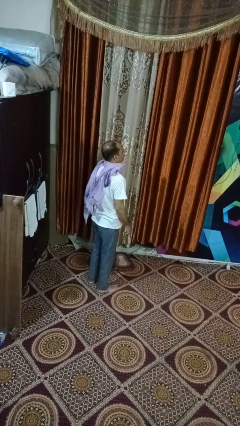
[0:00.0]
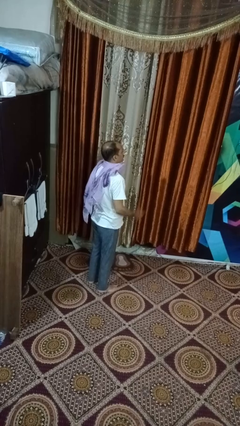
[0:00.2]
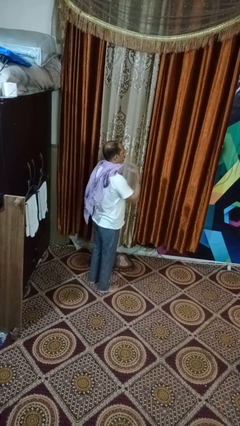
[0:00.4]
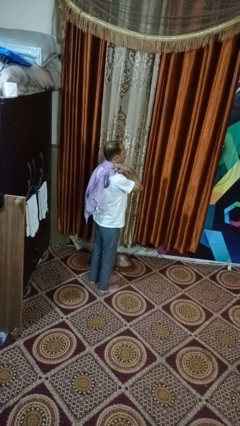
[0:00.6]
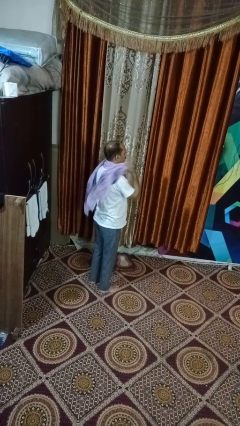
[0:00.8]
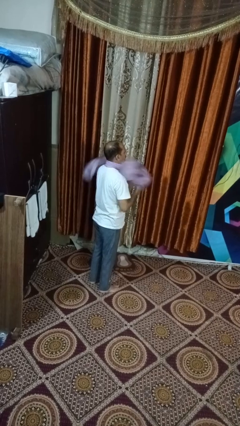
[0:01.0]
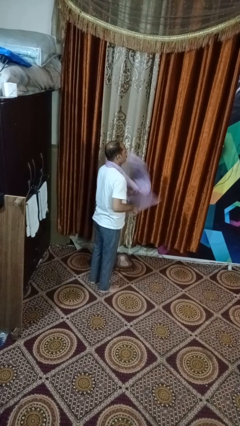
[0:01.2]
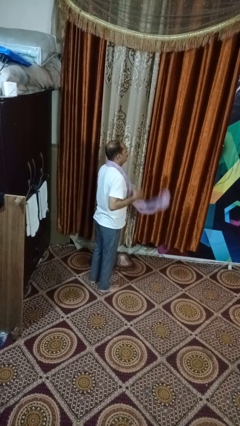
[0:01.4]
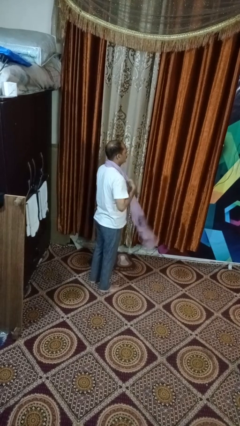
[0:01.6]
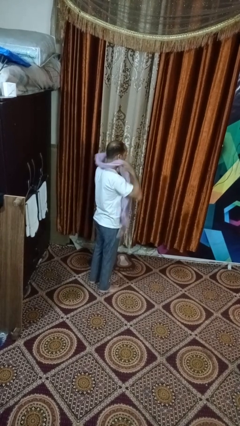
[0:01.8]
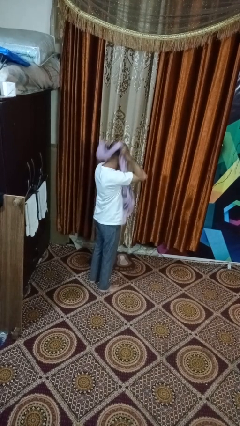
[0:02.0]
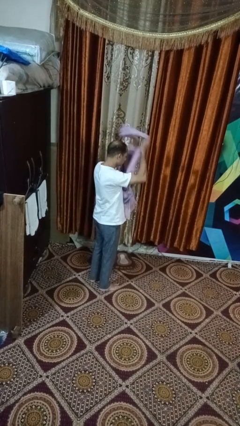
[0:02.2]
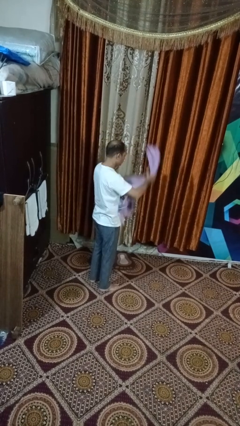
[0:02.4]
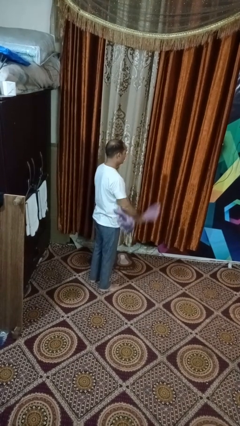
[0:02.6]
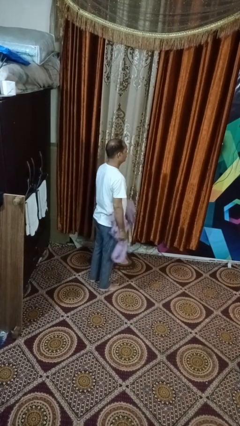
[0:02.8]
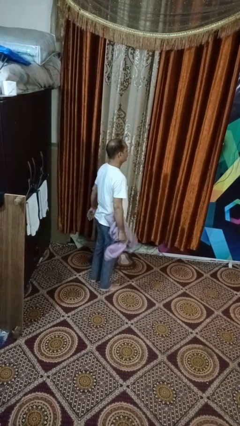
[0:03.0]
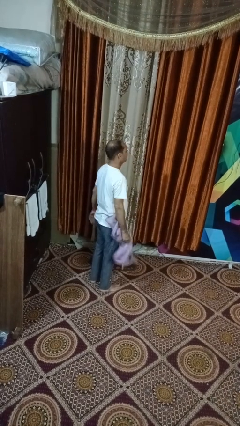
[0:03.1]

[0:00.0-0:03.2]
person takes off scarf

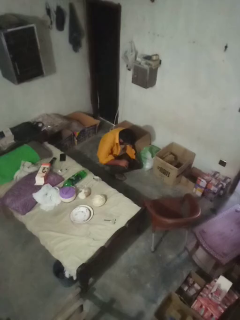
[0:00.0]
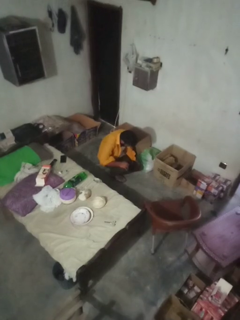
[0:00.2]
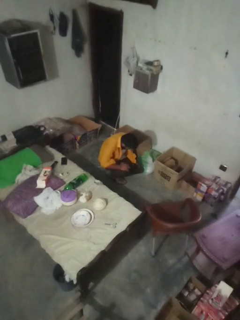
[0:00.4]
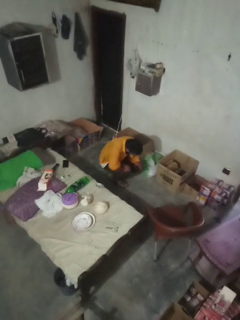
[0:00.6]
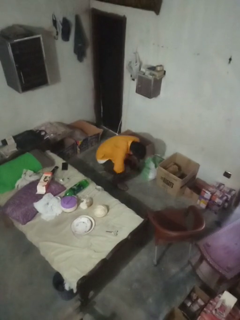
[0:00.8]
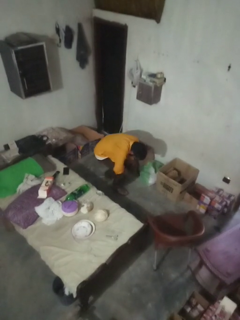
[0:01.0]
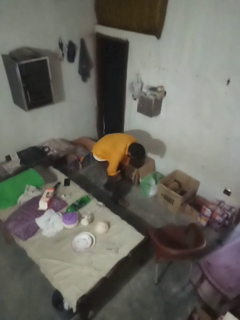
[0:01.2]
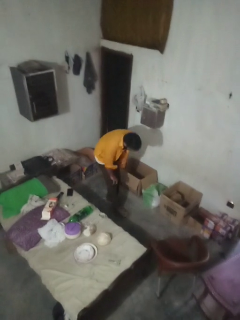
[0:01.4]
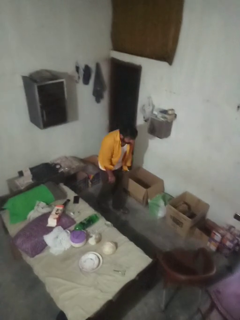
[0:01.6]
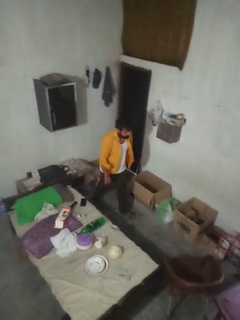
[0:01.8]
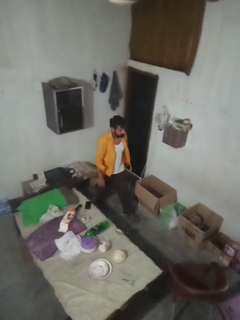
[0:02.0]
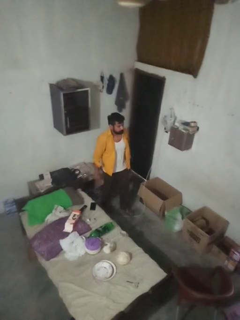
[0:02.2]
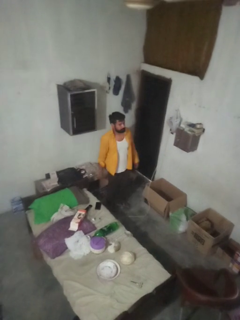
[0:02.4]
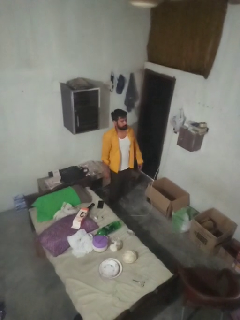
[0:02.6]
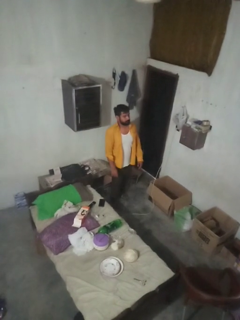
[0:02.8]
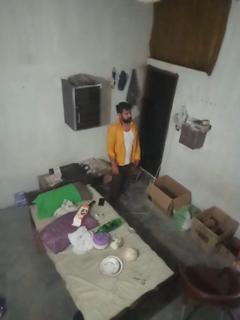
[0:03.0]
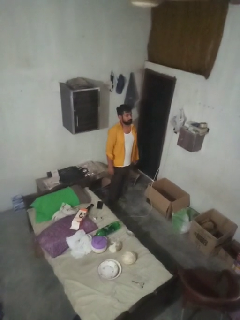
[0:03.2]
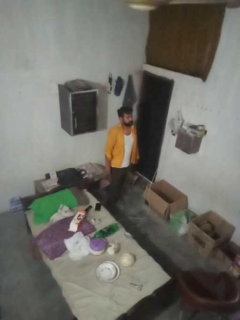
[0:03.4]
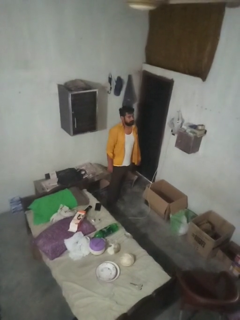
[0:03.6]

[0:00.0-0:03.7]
person stands up from floor

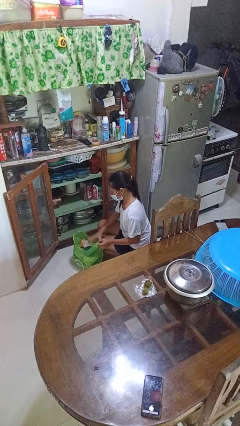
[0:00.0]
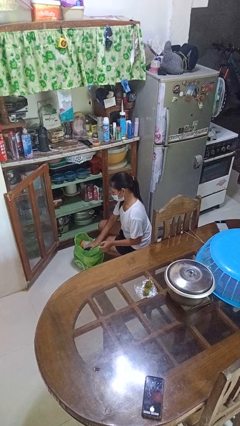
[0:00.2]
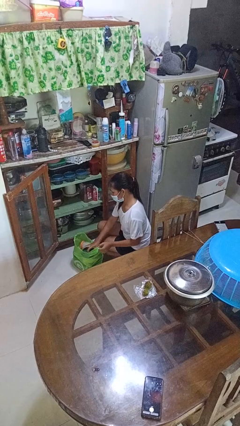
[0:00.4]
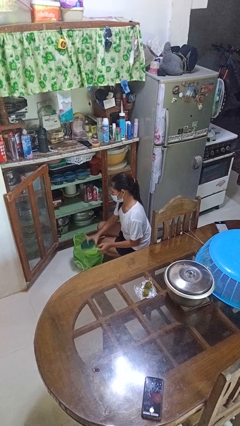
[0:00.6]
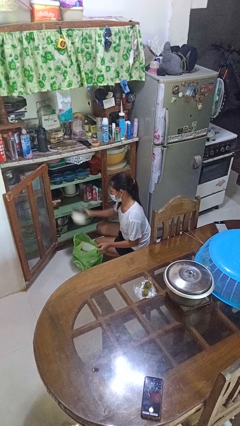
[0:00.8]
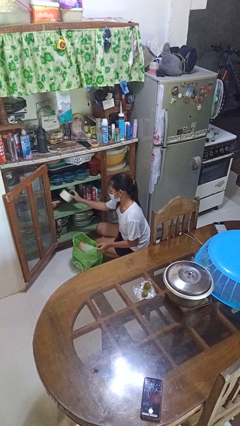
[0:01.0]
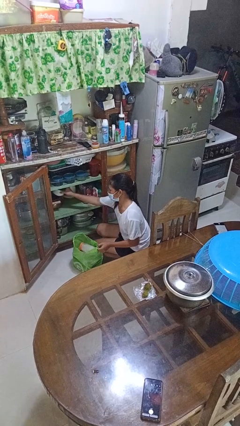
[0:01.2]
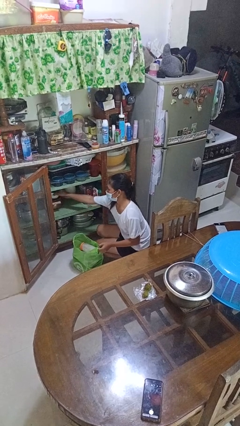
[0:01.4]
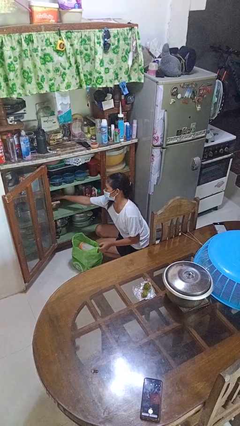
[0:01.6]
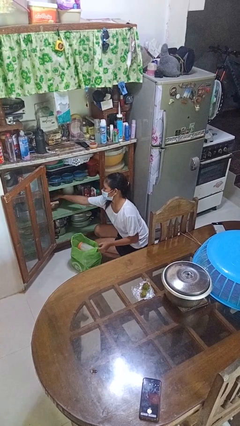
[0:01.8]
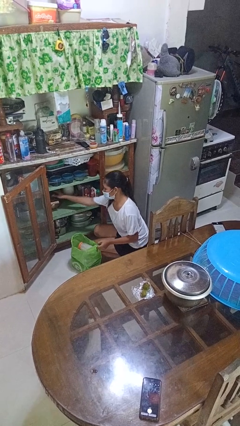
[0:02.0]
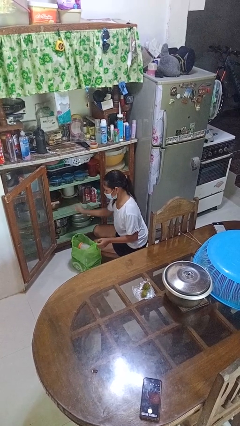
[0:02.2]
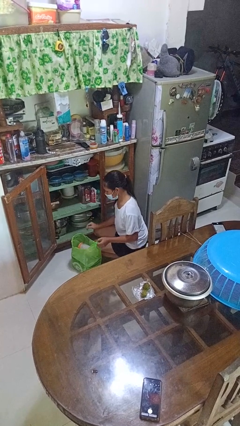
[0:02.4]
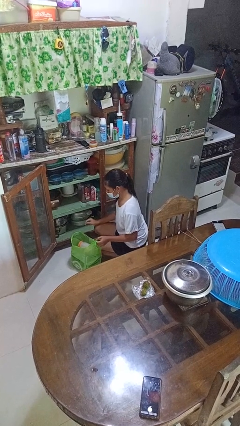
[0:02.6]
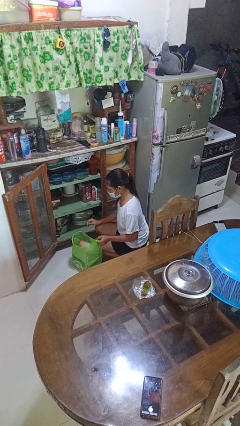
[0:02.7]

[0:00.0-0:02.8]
person loads groceries into cabinet

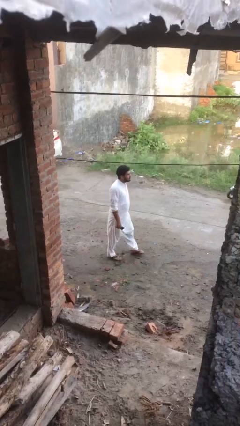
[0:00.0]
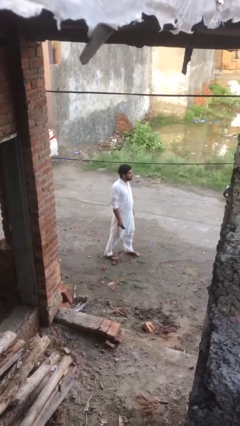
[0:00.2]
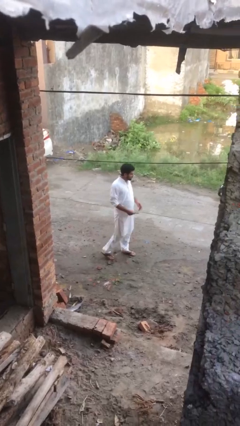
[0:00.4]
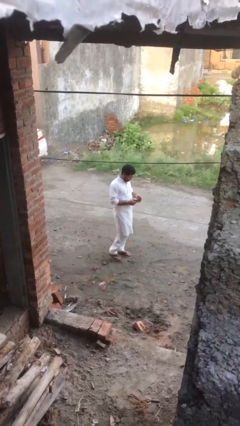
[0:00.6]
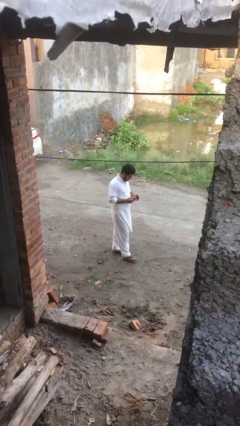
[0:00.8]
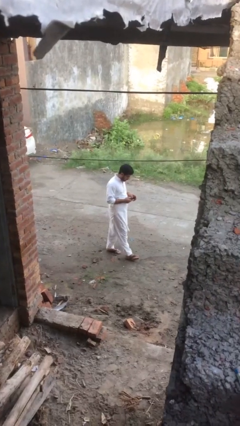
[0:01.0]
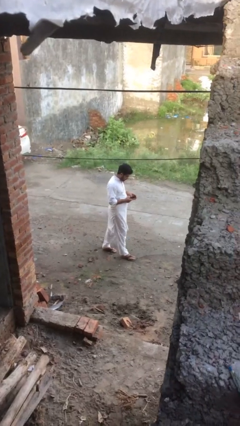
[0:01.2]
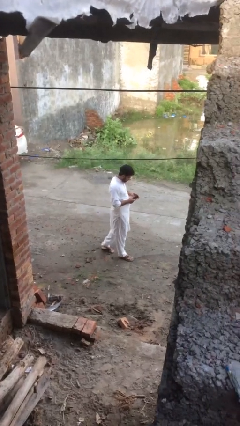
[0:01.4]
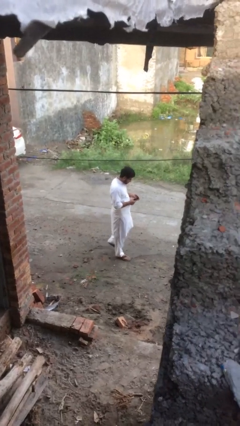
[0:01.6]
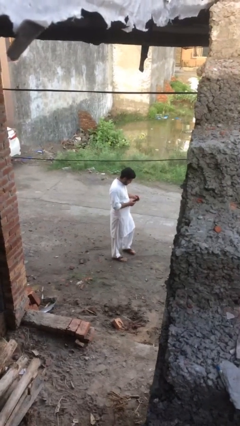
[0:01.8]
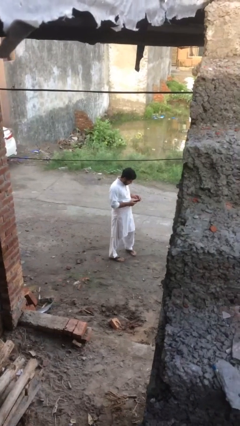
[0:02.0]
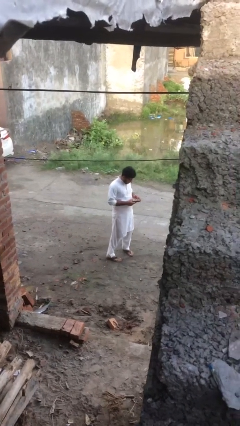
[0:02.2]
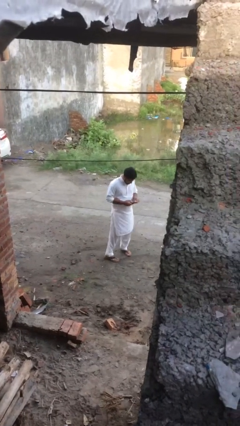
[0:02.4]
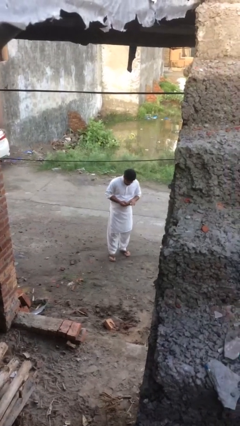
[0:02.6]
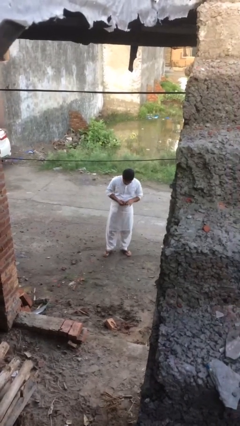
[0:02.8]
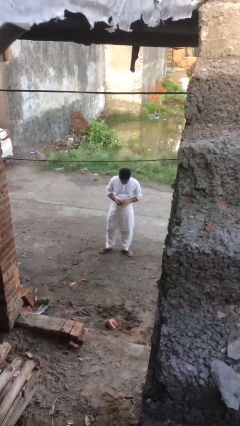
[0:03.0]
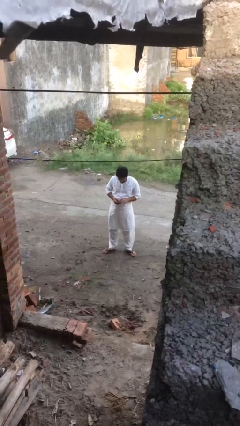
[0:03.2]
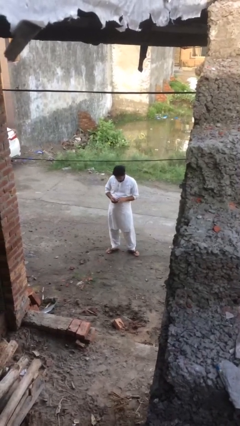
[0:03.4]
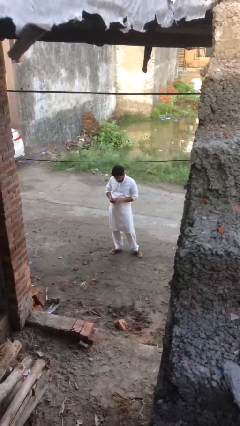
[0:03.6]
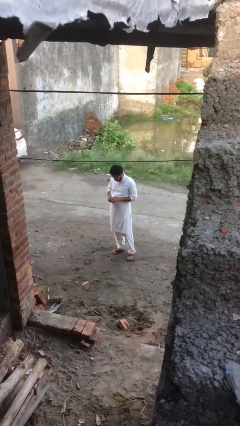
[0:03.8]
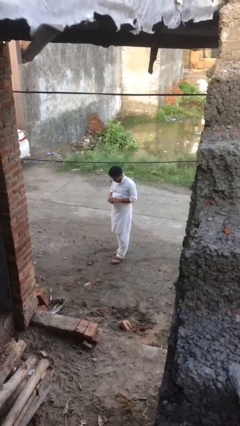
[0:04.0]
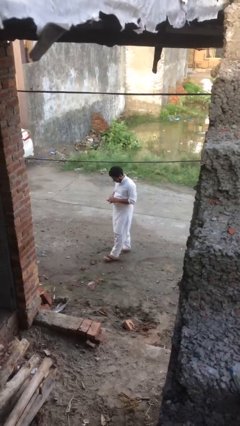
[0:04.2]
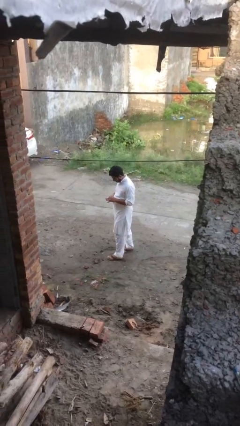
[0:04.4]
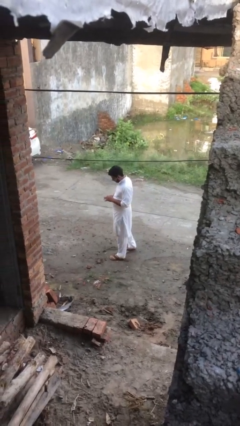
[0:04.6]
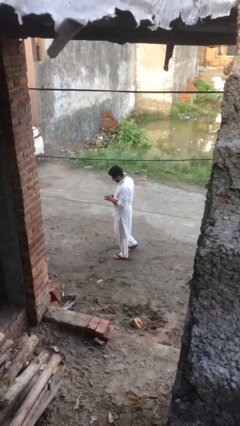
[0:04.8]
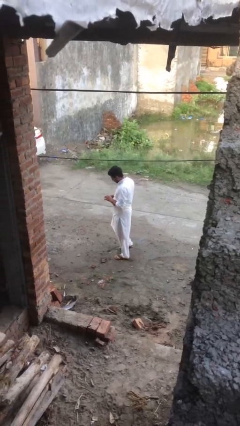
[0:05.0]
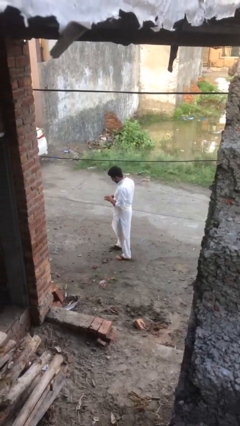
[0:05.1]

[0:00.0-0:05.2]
person texts on phone

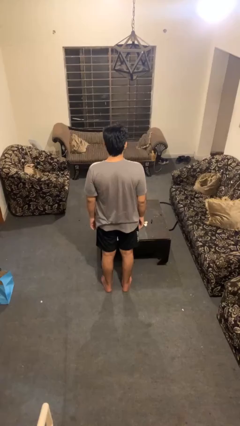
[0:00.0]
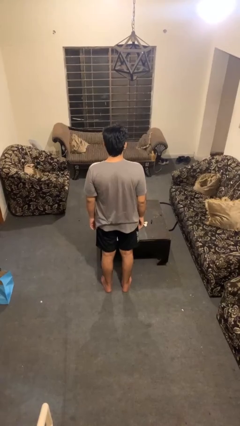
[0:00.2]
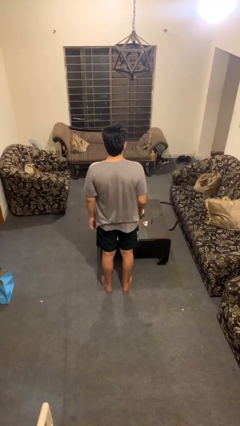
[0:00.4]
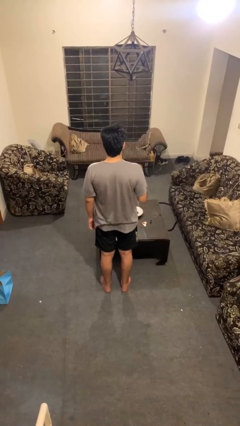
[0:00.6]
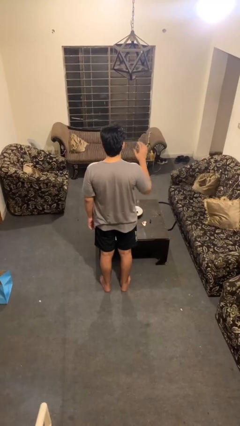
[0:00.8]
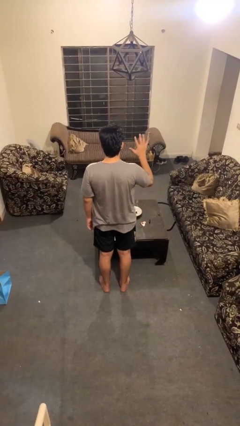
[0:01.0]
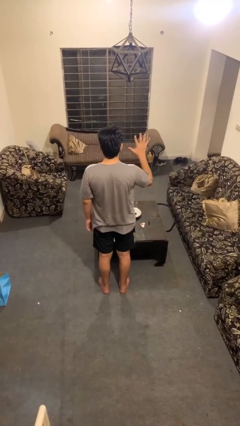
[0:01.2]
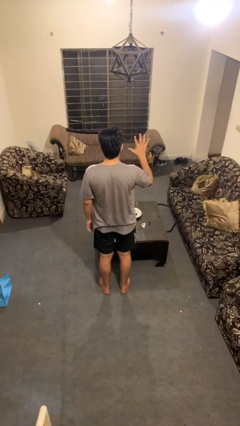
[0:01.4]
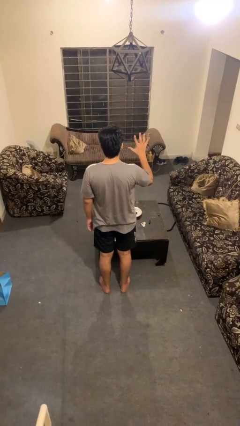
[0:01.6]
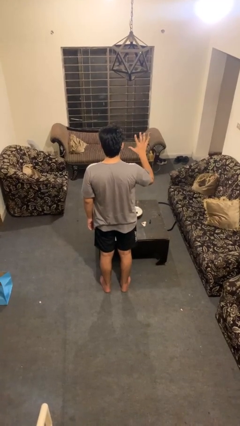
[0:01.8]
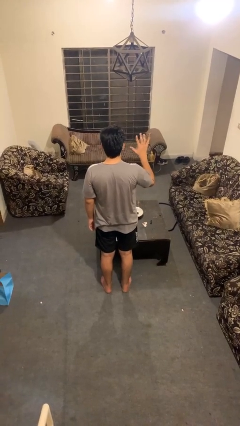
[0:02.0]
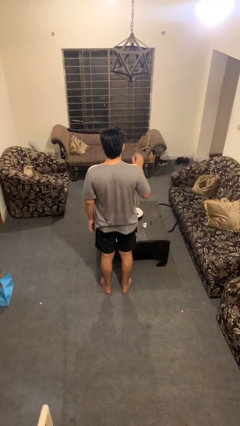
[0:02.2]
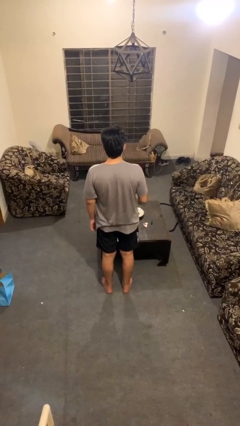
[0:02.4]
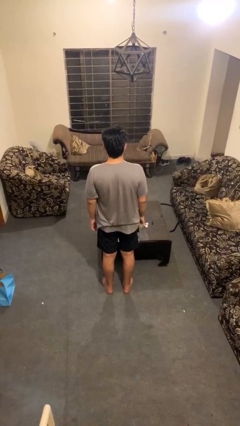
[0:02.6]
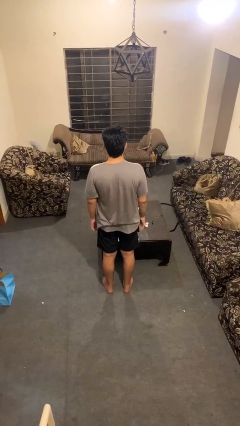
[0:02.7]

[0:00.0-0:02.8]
person gestures number five

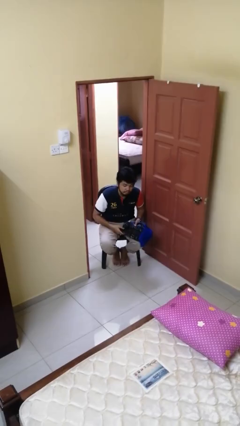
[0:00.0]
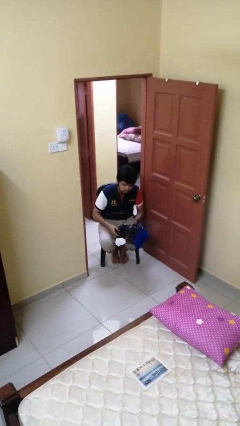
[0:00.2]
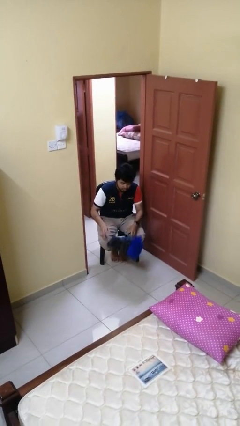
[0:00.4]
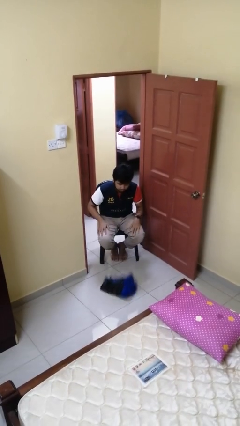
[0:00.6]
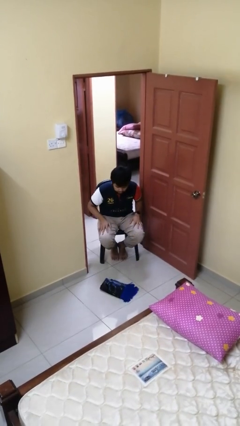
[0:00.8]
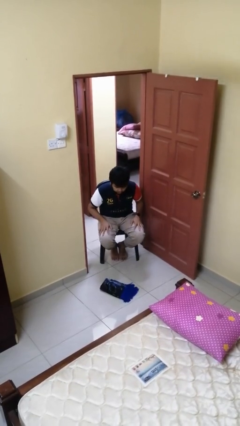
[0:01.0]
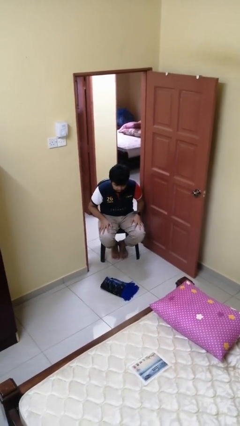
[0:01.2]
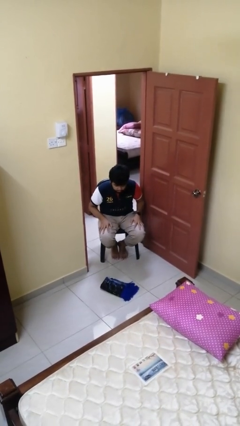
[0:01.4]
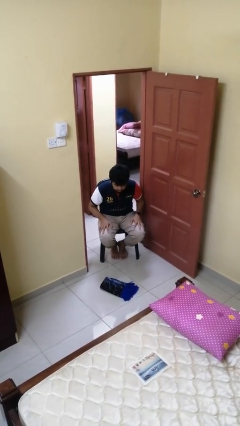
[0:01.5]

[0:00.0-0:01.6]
person drops object
